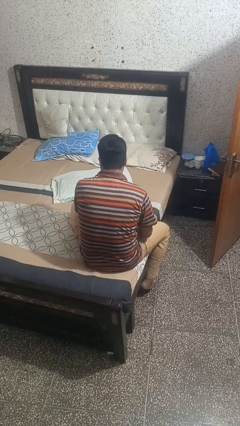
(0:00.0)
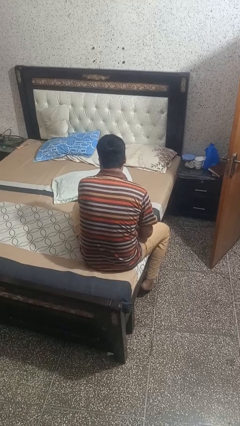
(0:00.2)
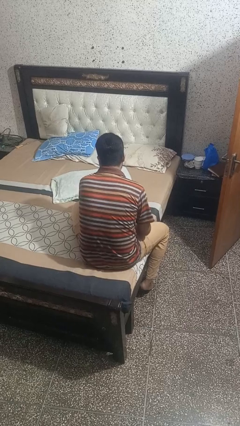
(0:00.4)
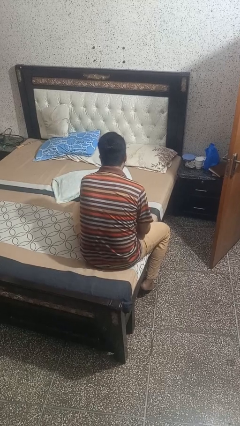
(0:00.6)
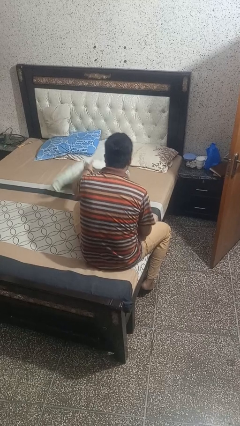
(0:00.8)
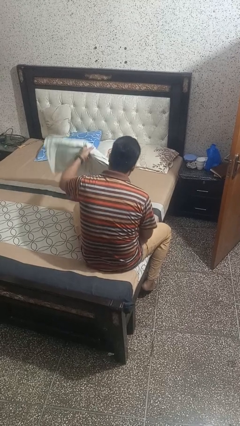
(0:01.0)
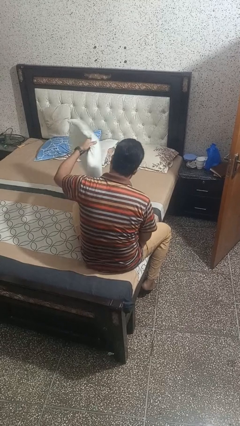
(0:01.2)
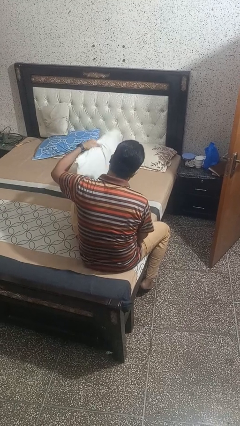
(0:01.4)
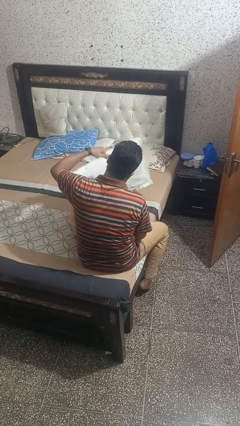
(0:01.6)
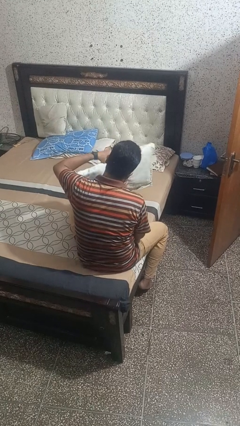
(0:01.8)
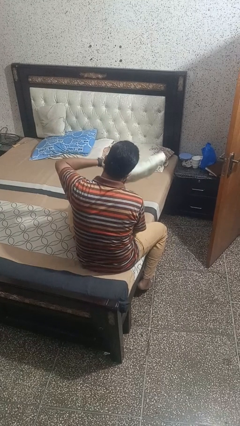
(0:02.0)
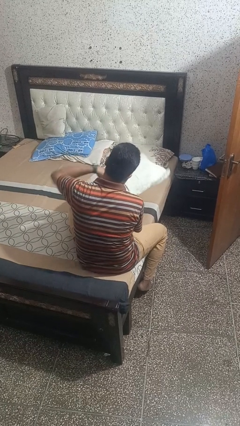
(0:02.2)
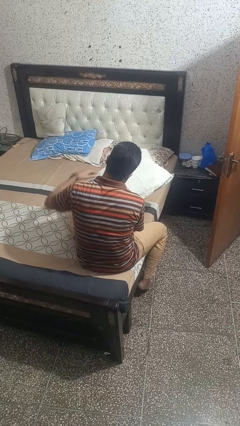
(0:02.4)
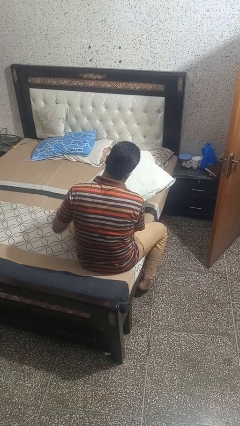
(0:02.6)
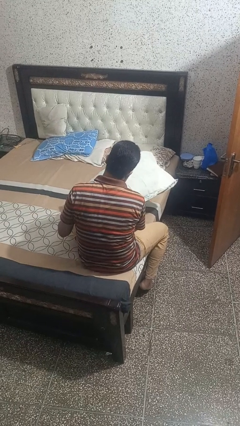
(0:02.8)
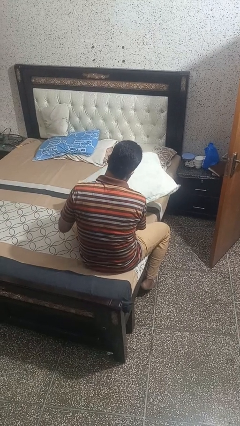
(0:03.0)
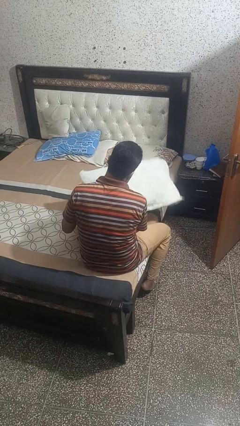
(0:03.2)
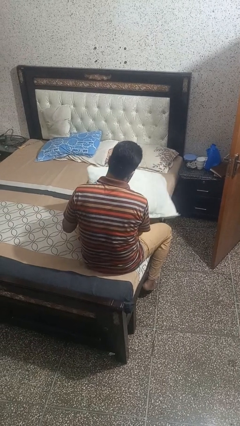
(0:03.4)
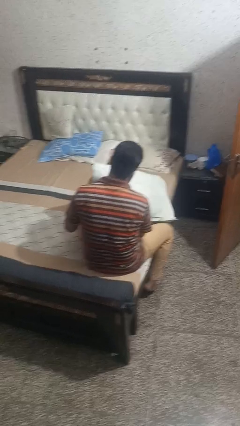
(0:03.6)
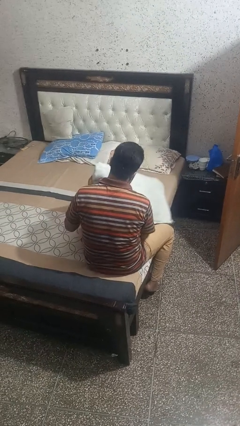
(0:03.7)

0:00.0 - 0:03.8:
person picks up object from bed

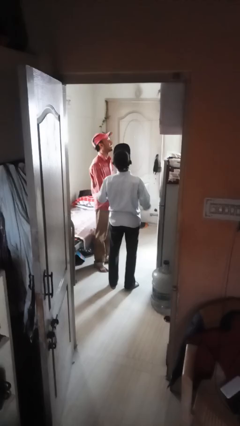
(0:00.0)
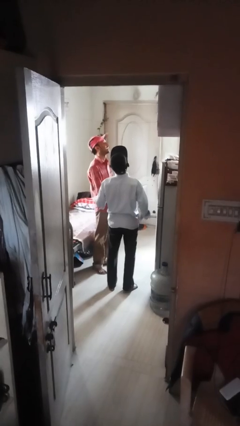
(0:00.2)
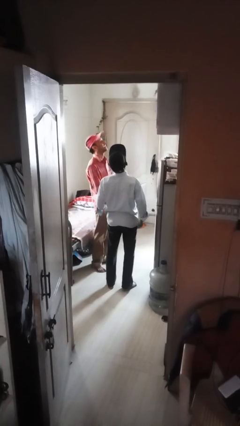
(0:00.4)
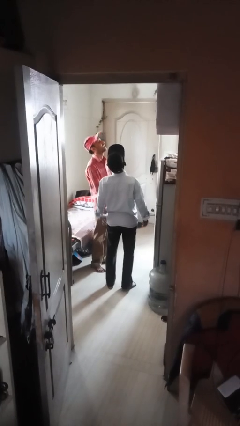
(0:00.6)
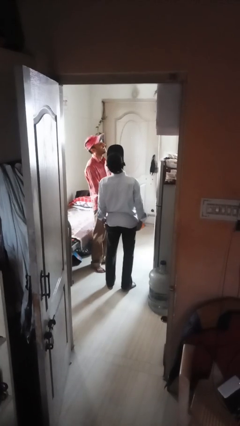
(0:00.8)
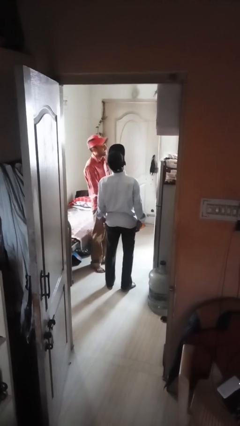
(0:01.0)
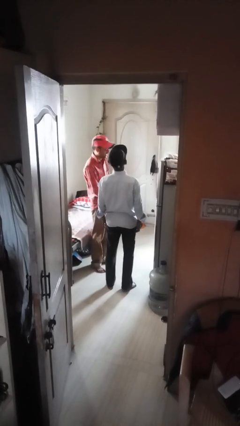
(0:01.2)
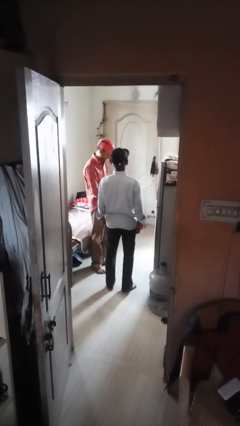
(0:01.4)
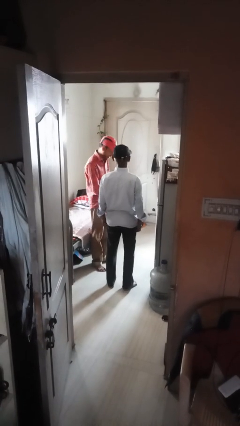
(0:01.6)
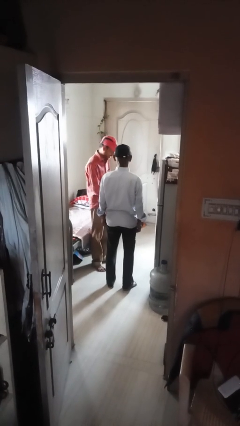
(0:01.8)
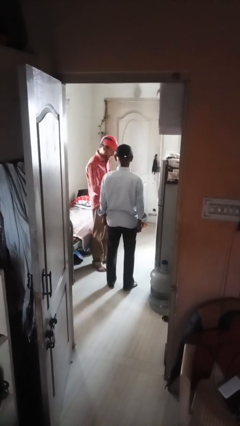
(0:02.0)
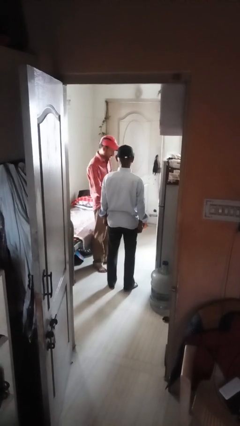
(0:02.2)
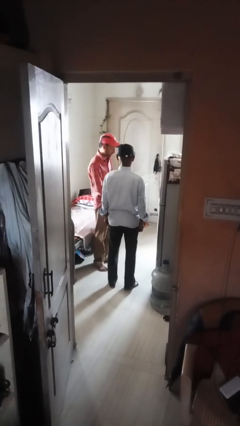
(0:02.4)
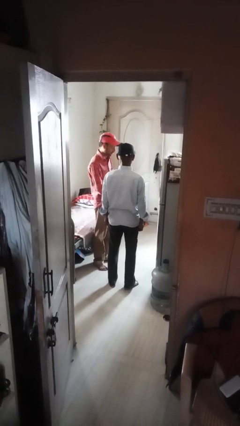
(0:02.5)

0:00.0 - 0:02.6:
person laughs with person

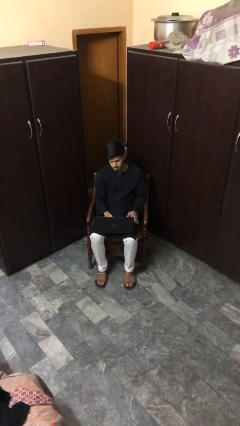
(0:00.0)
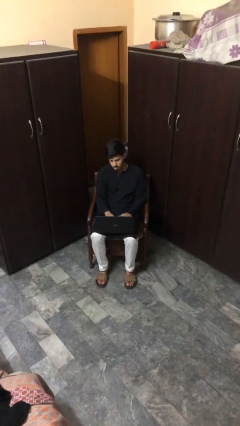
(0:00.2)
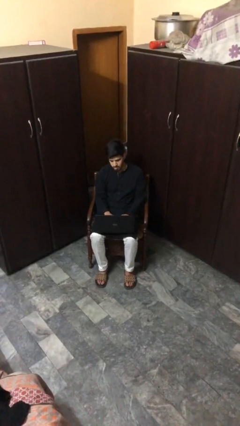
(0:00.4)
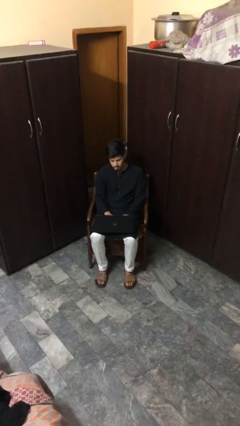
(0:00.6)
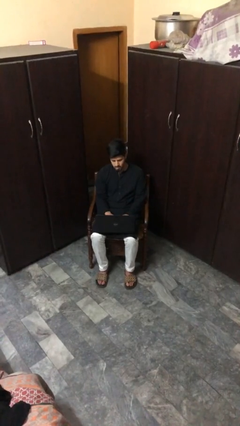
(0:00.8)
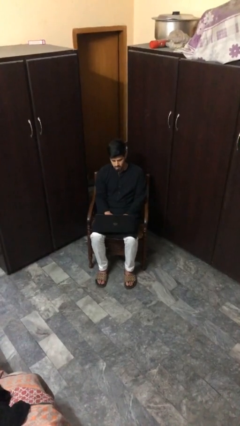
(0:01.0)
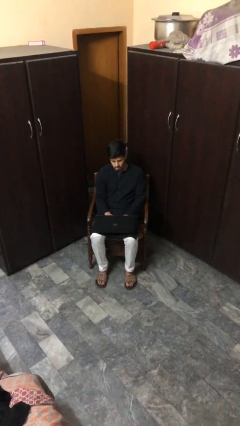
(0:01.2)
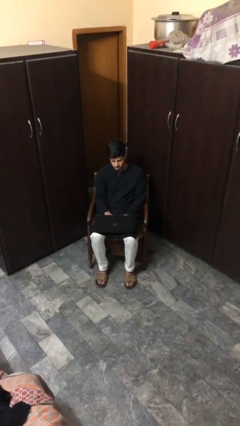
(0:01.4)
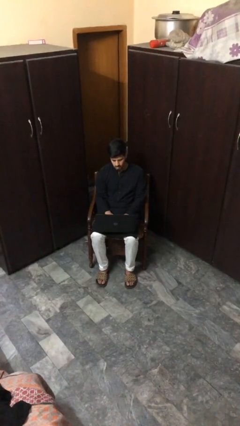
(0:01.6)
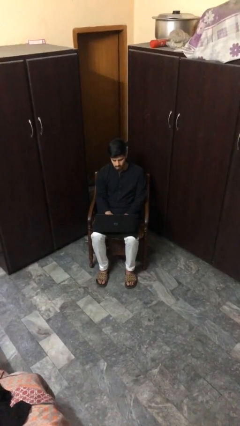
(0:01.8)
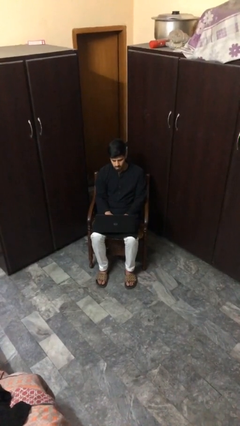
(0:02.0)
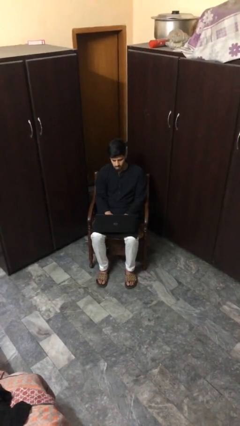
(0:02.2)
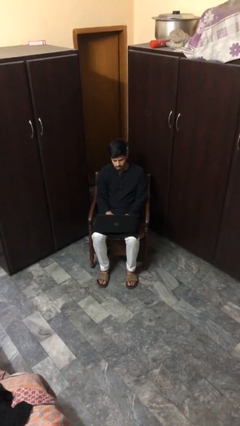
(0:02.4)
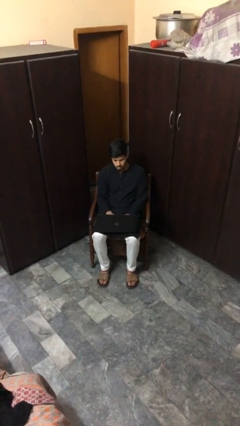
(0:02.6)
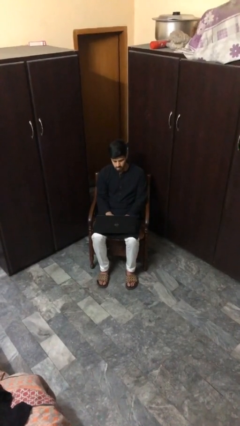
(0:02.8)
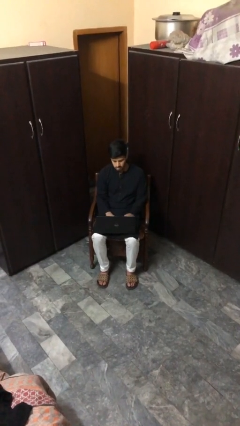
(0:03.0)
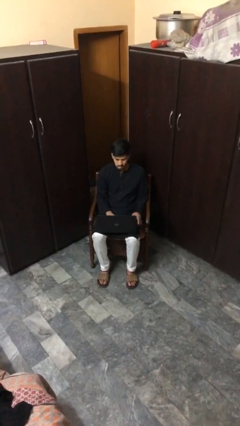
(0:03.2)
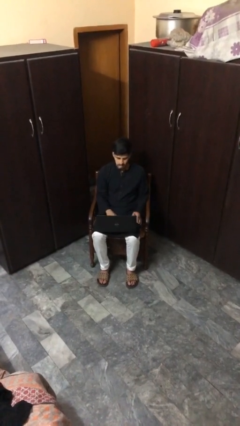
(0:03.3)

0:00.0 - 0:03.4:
person interacts with laptop

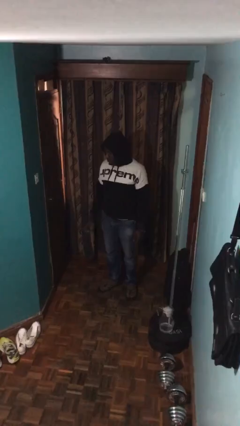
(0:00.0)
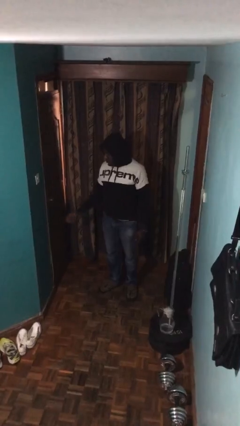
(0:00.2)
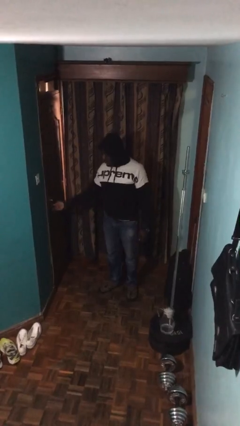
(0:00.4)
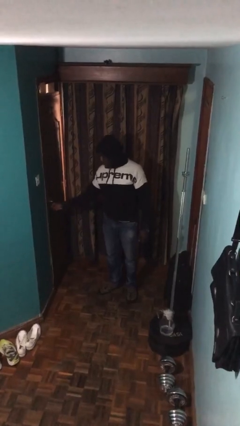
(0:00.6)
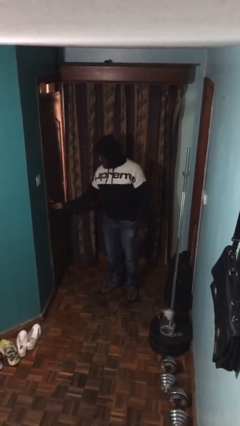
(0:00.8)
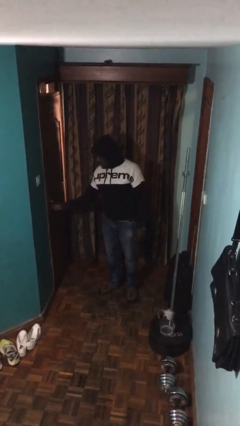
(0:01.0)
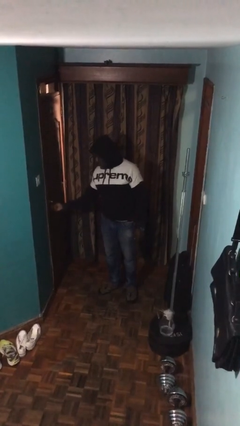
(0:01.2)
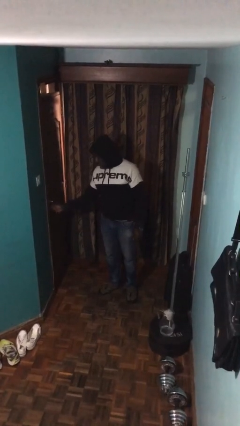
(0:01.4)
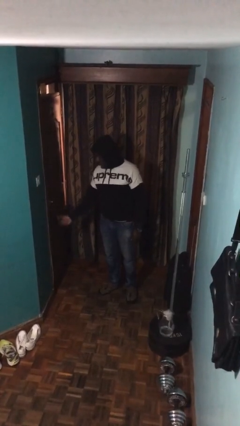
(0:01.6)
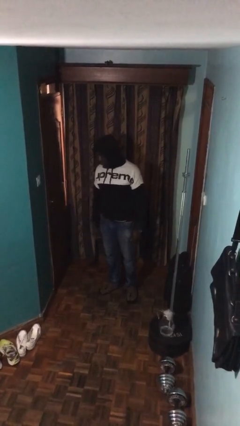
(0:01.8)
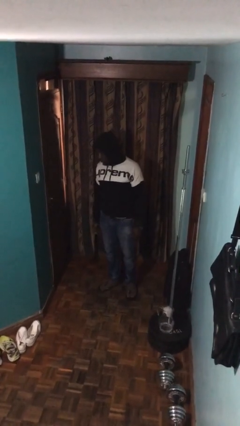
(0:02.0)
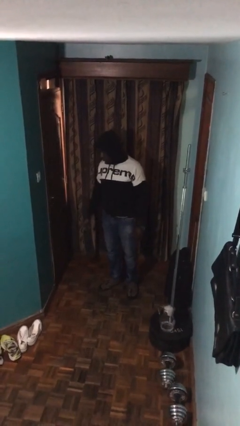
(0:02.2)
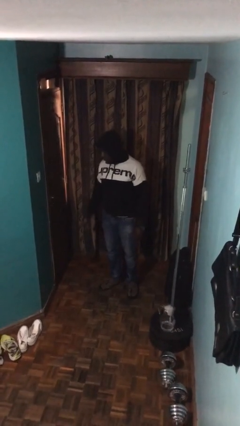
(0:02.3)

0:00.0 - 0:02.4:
person unlocks door with keys

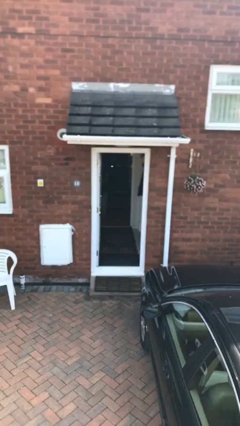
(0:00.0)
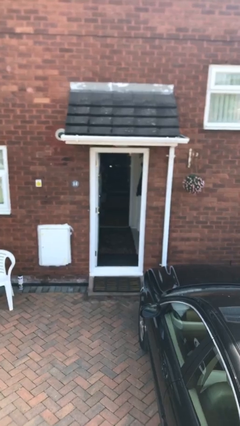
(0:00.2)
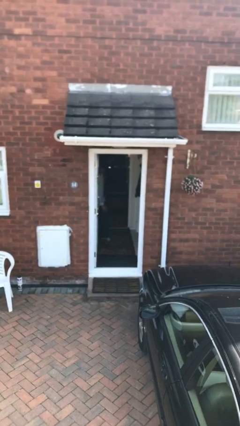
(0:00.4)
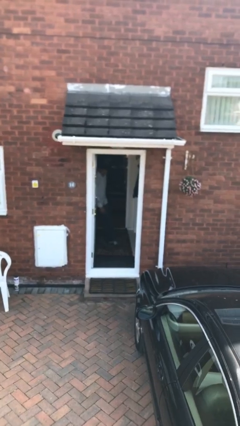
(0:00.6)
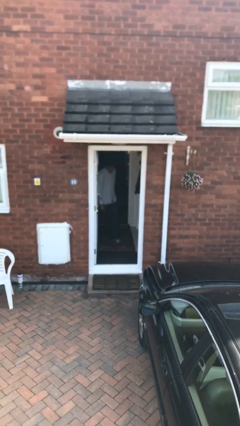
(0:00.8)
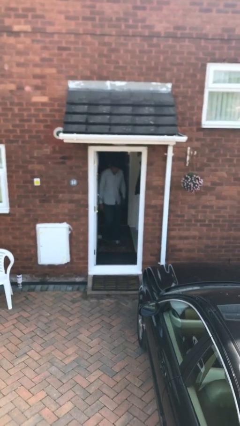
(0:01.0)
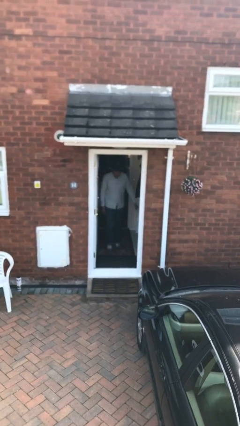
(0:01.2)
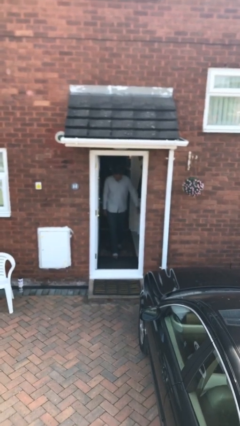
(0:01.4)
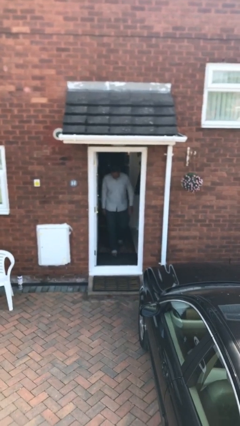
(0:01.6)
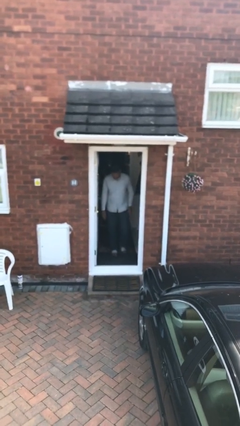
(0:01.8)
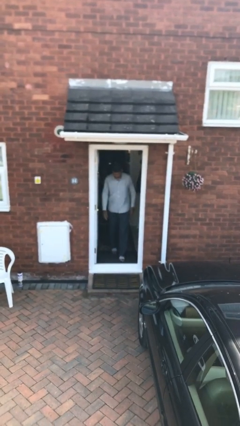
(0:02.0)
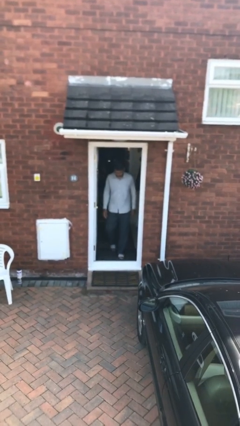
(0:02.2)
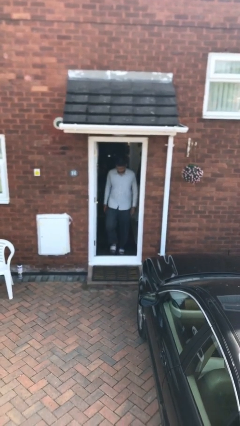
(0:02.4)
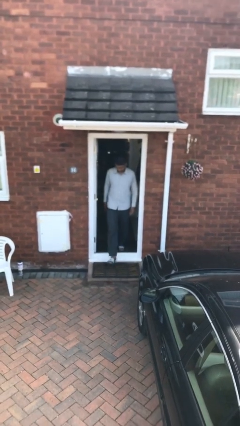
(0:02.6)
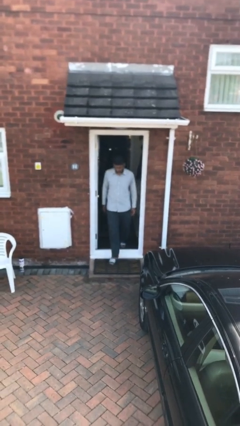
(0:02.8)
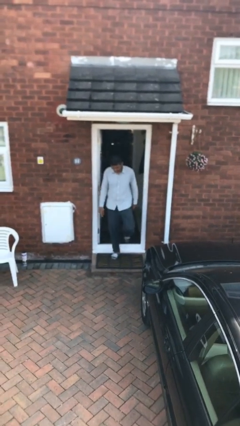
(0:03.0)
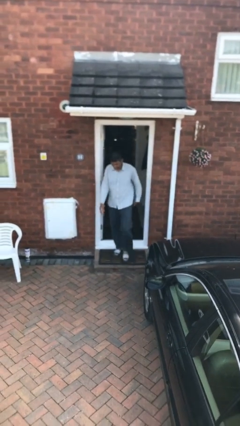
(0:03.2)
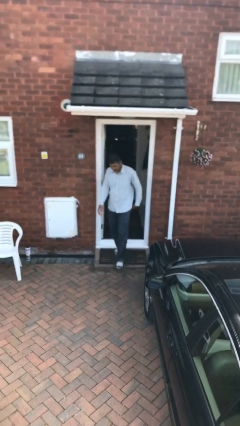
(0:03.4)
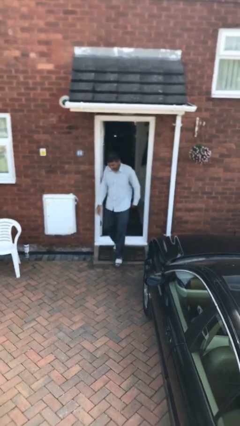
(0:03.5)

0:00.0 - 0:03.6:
person enters scene through structure

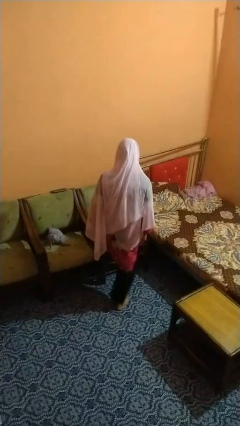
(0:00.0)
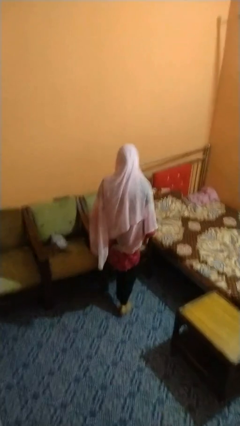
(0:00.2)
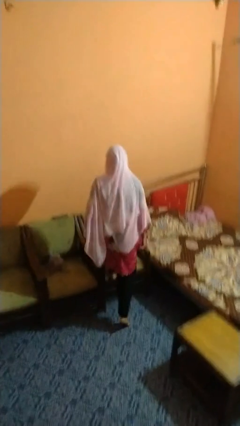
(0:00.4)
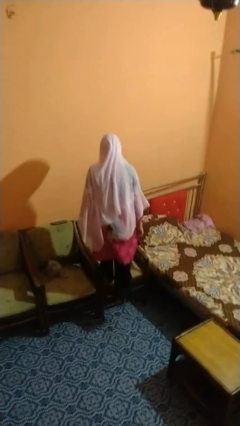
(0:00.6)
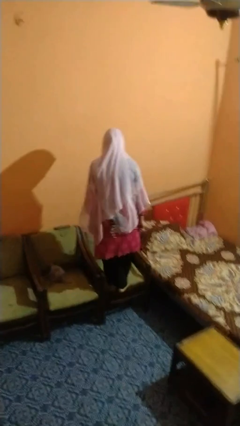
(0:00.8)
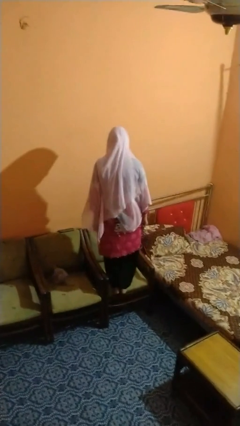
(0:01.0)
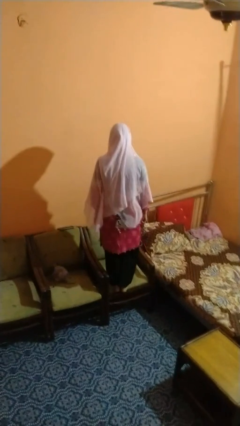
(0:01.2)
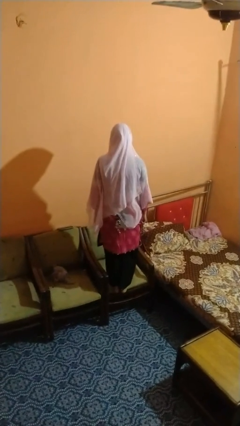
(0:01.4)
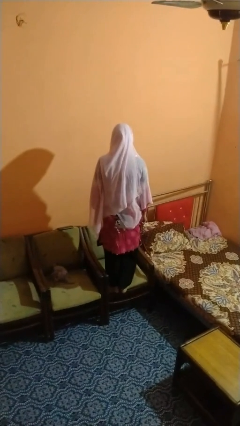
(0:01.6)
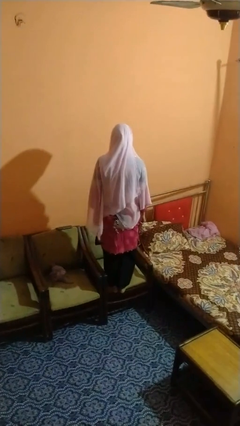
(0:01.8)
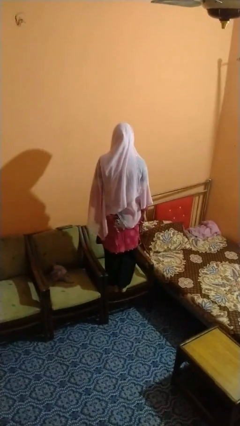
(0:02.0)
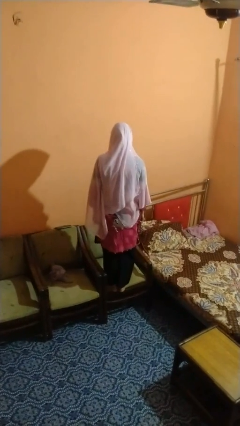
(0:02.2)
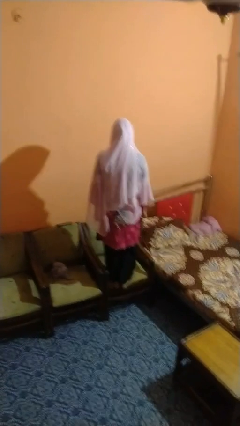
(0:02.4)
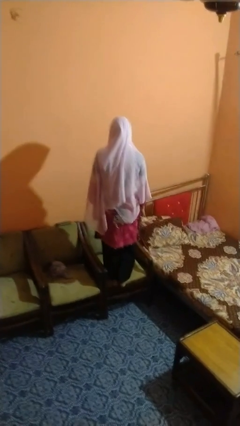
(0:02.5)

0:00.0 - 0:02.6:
person climbs on chair
